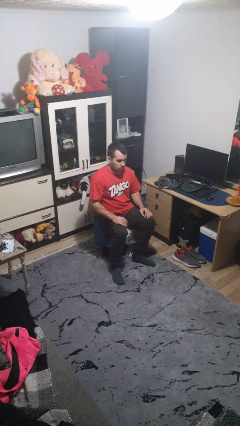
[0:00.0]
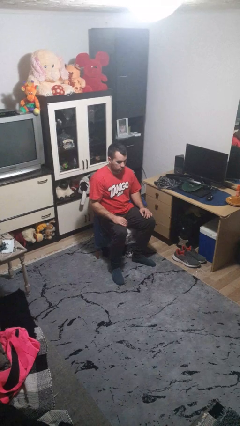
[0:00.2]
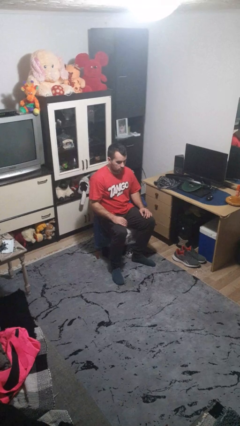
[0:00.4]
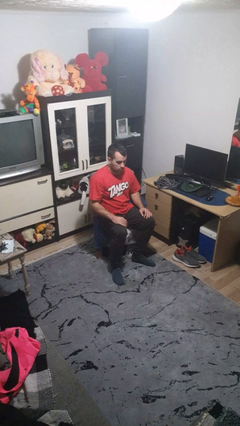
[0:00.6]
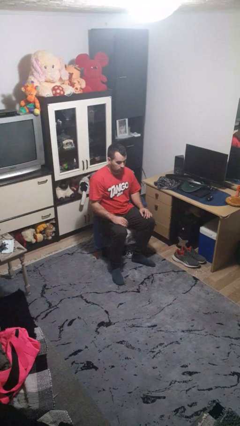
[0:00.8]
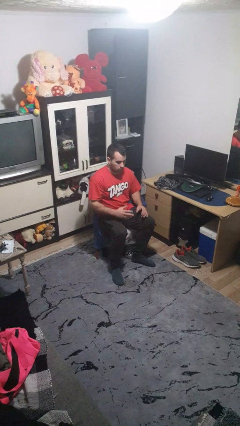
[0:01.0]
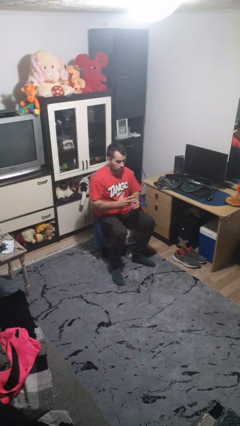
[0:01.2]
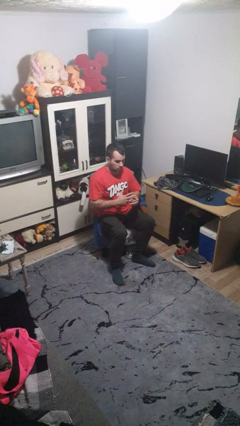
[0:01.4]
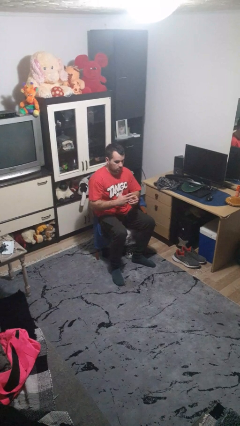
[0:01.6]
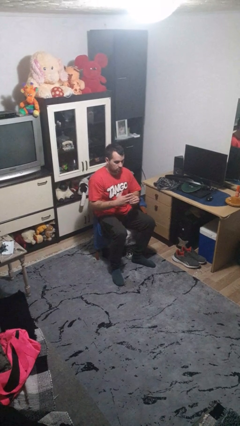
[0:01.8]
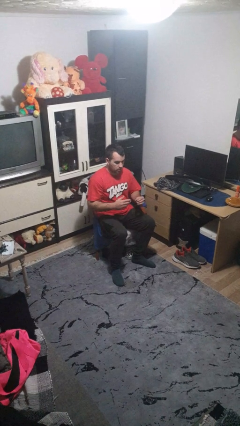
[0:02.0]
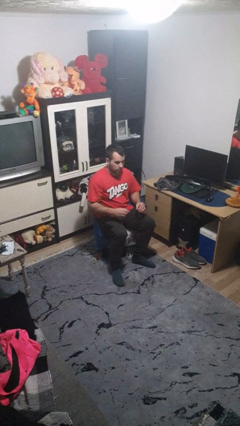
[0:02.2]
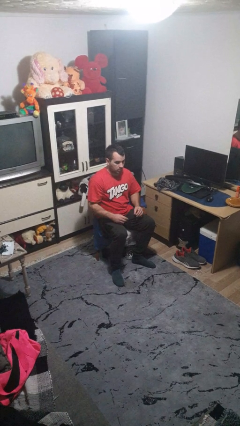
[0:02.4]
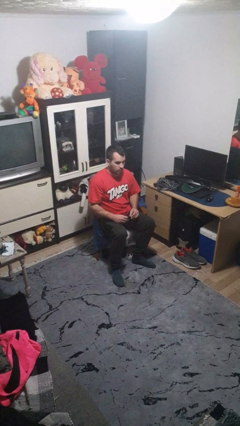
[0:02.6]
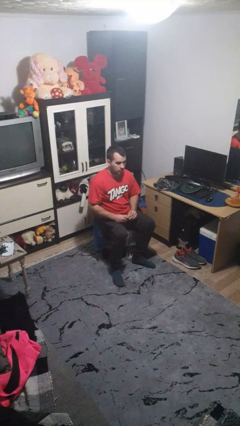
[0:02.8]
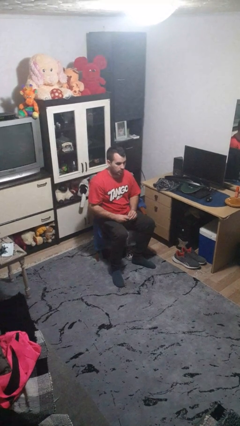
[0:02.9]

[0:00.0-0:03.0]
person takes off ring

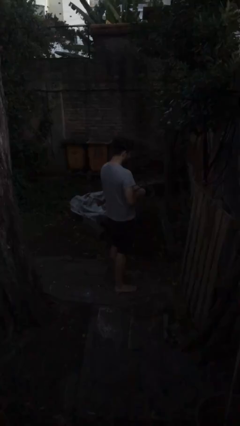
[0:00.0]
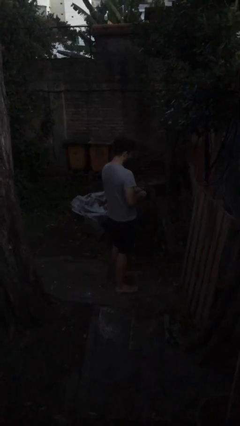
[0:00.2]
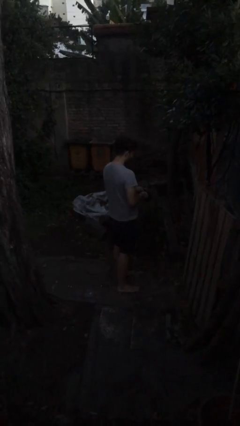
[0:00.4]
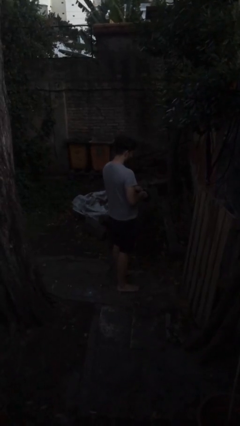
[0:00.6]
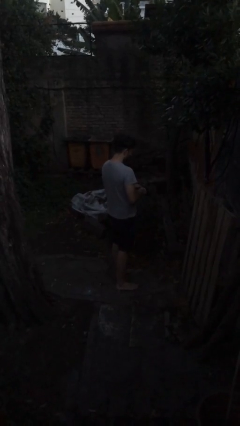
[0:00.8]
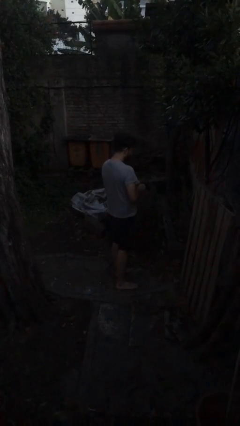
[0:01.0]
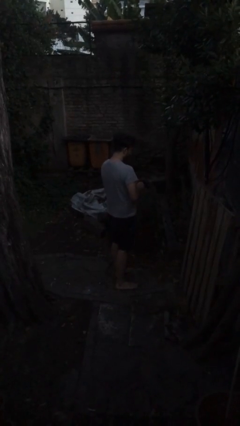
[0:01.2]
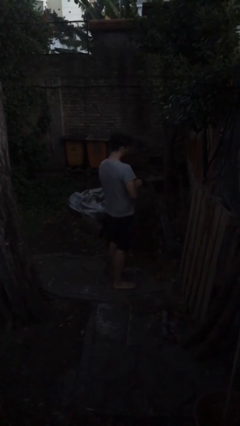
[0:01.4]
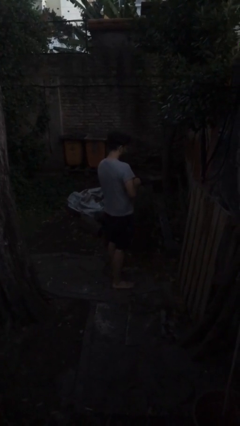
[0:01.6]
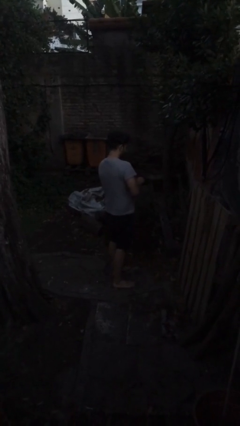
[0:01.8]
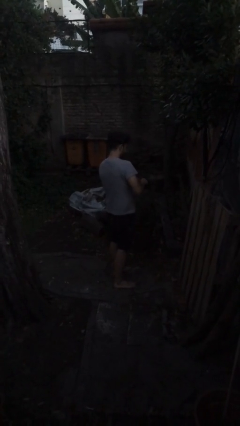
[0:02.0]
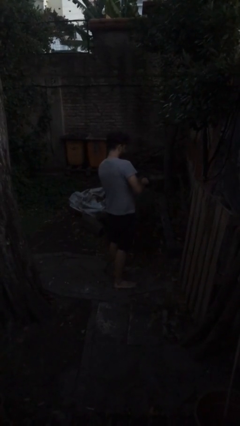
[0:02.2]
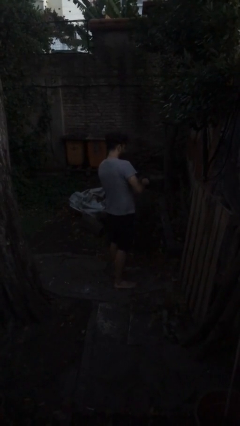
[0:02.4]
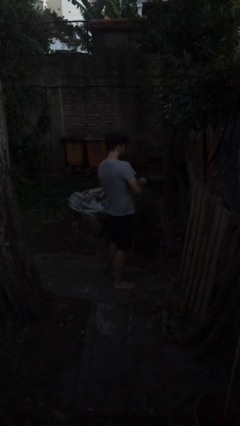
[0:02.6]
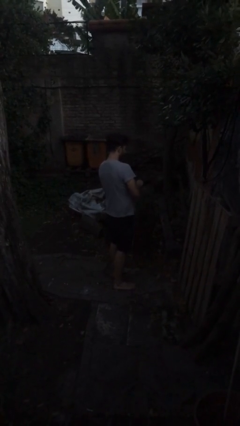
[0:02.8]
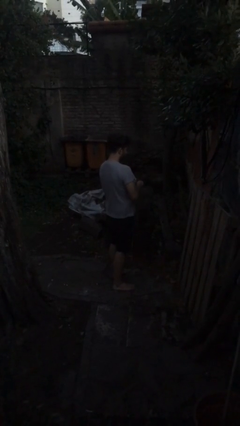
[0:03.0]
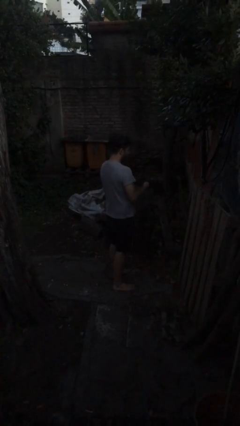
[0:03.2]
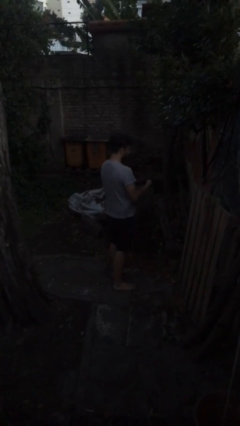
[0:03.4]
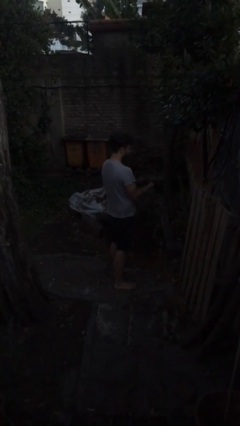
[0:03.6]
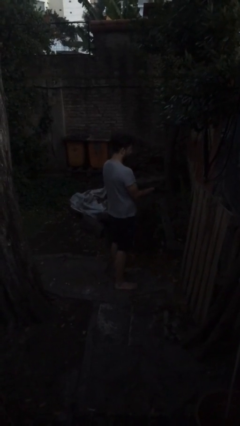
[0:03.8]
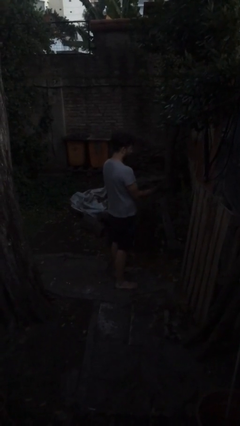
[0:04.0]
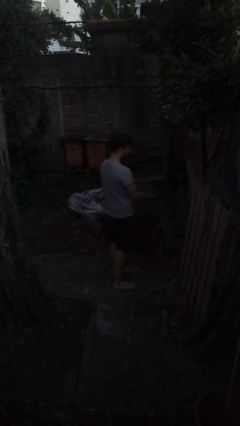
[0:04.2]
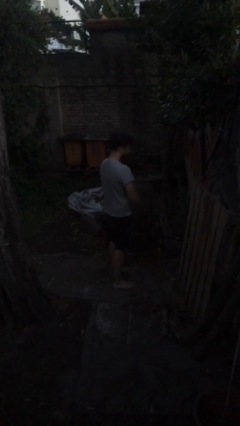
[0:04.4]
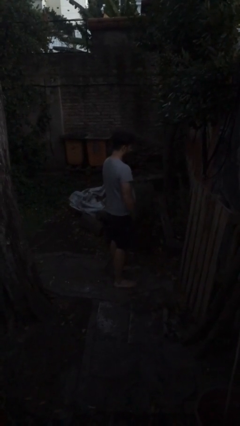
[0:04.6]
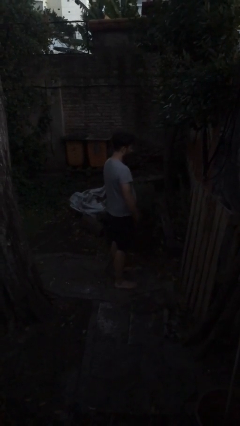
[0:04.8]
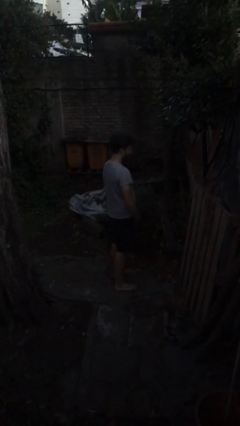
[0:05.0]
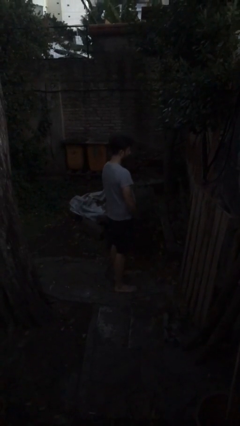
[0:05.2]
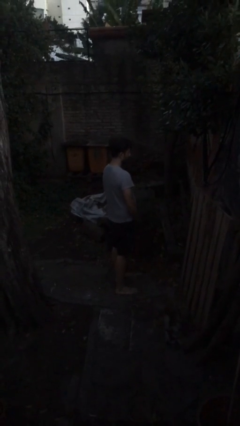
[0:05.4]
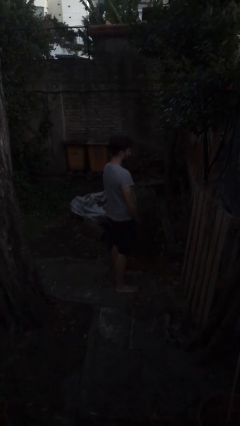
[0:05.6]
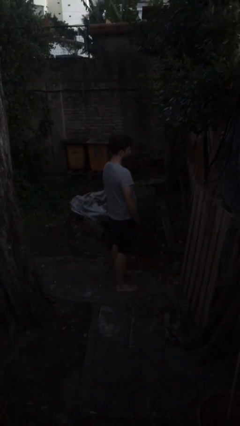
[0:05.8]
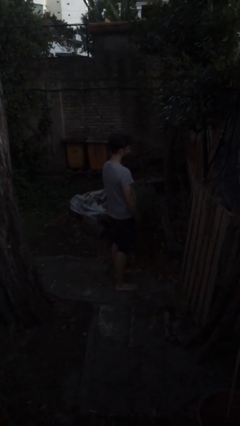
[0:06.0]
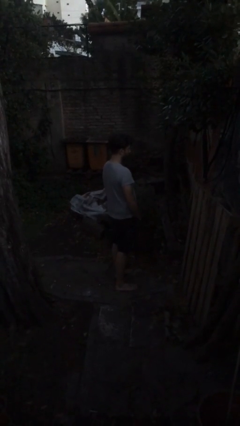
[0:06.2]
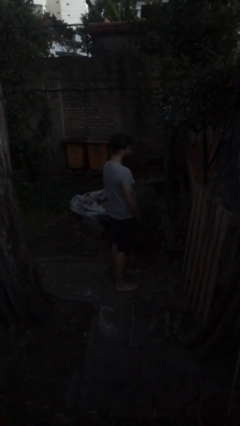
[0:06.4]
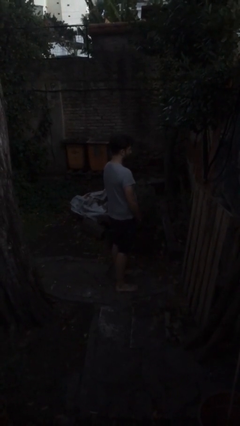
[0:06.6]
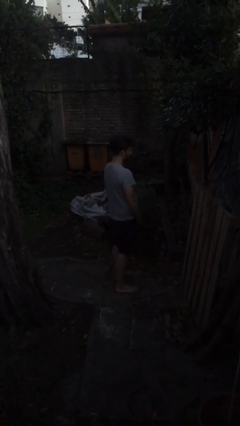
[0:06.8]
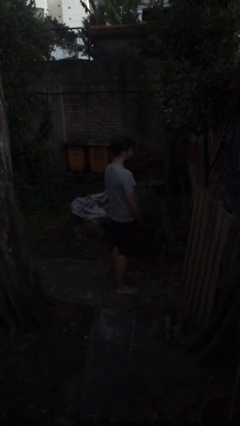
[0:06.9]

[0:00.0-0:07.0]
person puts on gloves

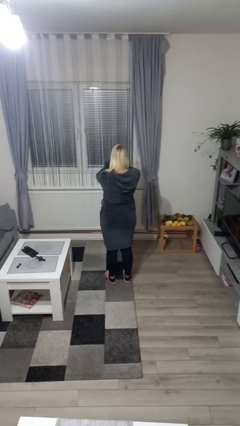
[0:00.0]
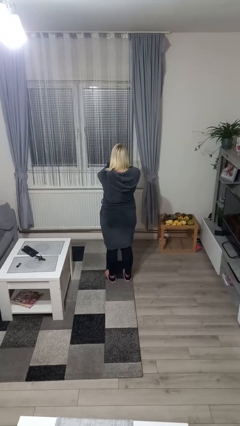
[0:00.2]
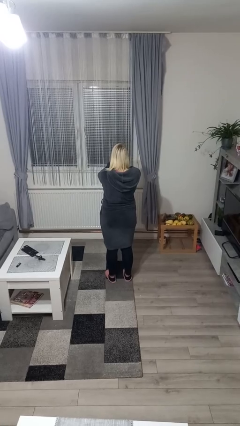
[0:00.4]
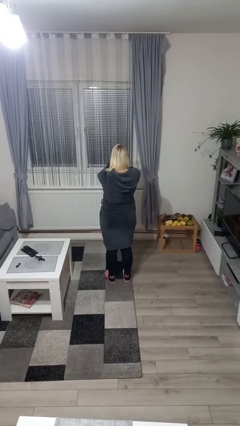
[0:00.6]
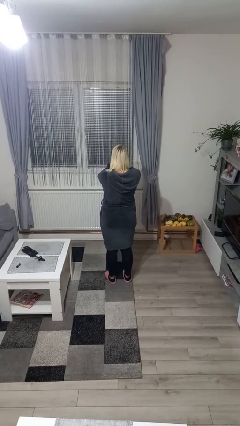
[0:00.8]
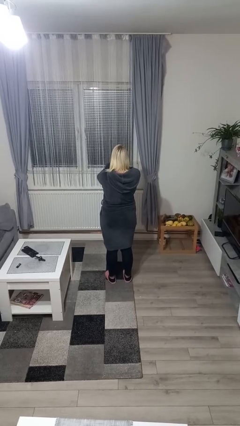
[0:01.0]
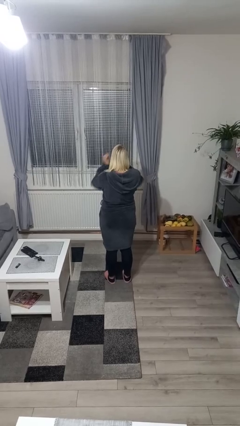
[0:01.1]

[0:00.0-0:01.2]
person covers face with hands

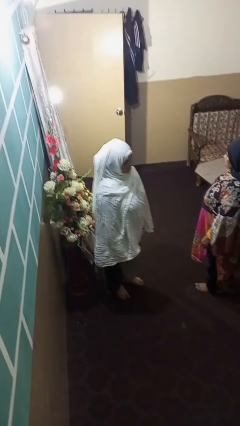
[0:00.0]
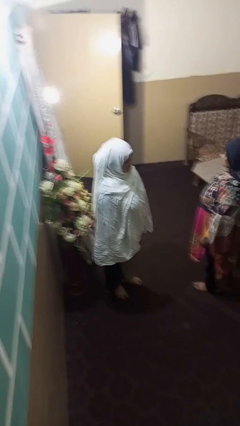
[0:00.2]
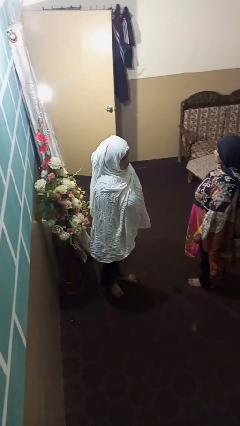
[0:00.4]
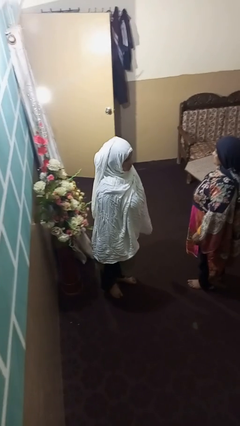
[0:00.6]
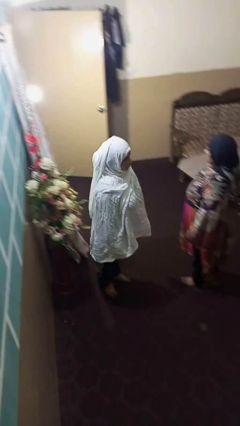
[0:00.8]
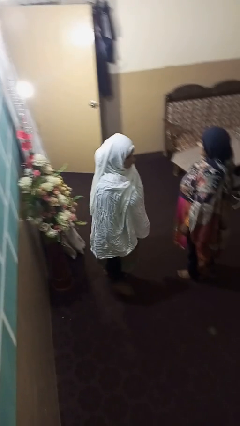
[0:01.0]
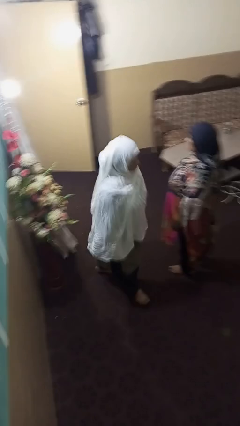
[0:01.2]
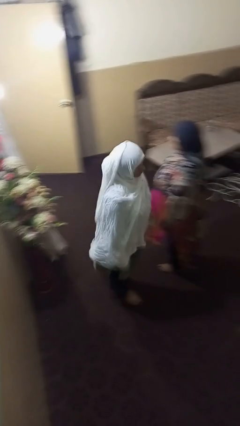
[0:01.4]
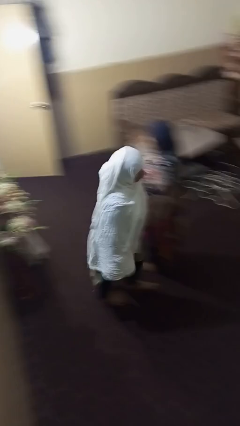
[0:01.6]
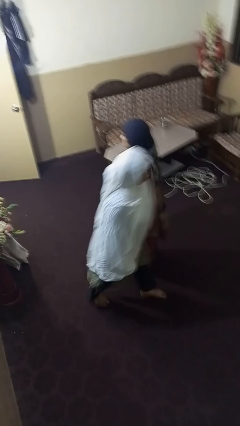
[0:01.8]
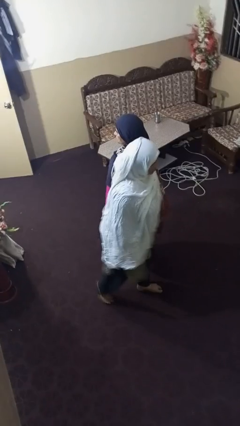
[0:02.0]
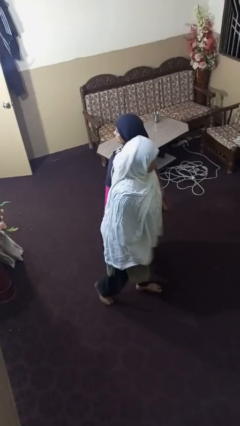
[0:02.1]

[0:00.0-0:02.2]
person shoves person

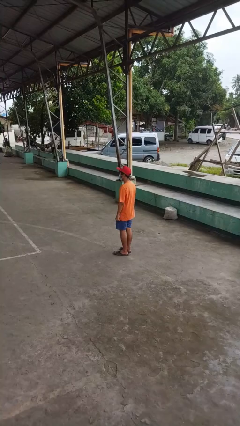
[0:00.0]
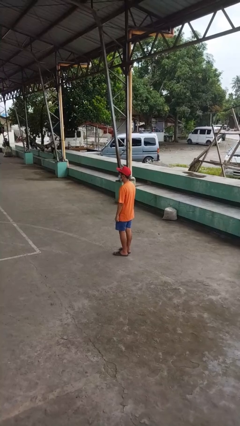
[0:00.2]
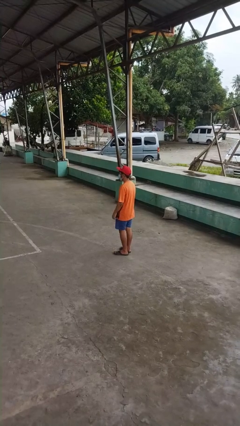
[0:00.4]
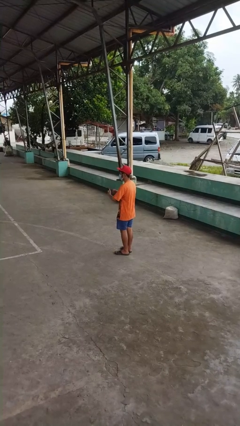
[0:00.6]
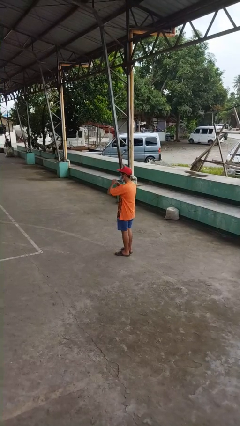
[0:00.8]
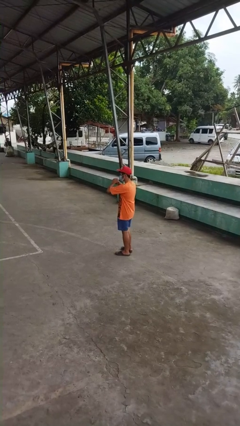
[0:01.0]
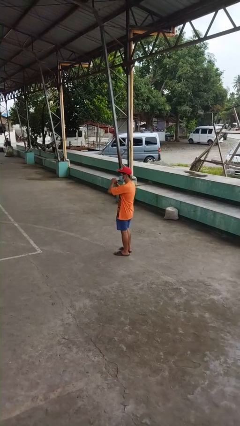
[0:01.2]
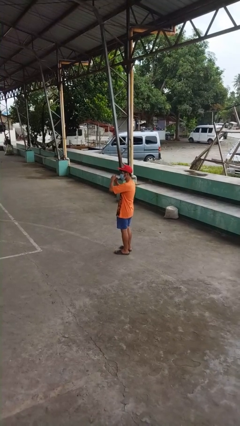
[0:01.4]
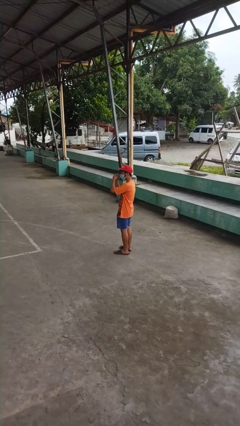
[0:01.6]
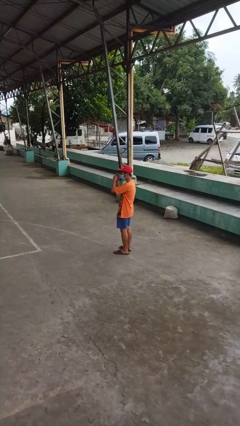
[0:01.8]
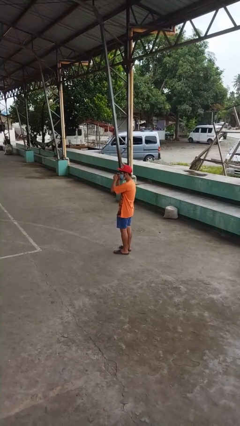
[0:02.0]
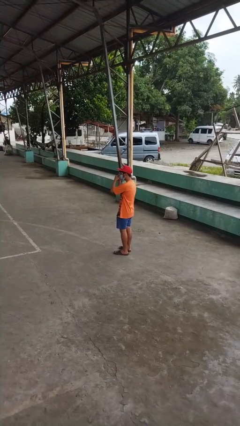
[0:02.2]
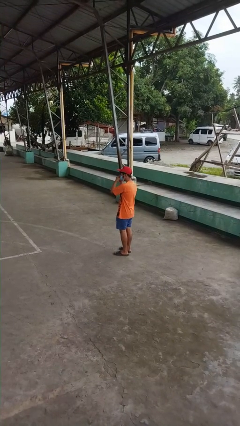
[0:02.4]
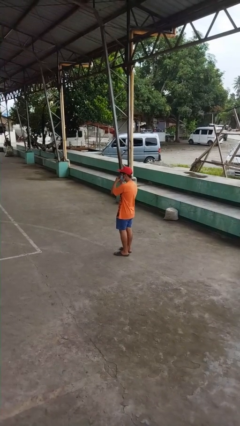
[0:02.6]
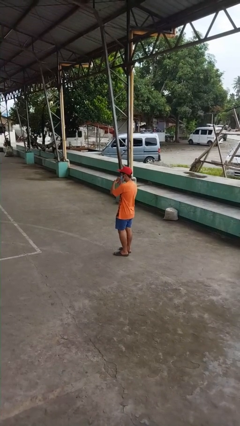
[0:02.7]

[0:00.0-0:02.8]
person cracks knuckles

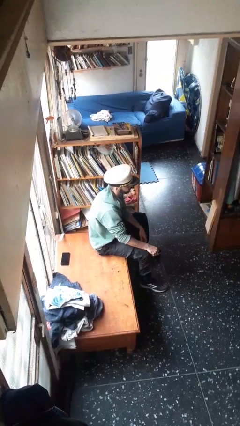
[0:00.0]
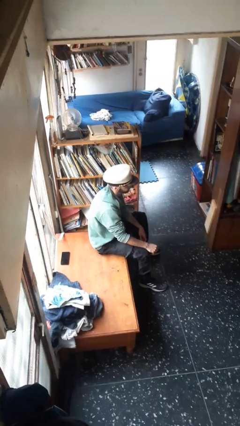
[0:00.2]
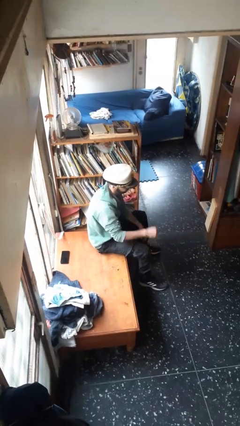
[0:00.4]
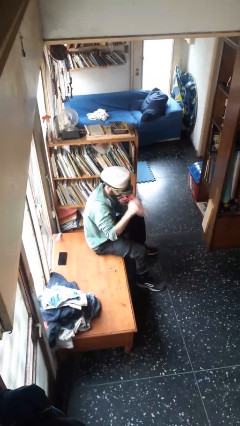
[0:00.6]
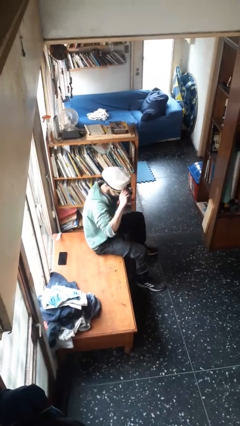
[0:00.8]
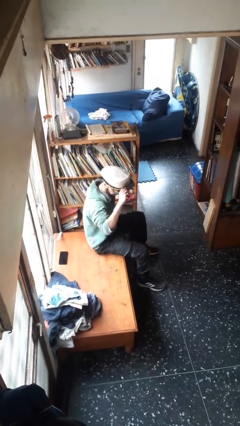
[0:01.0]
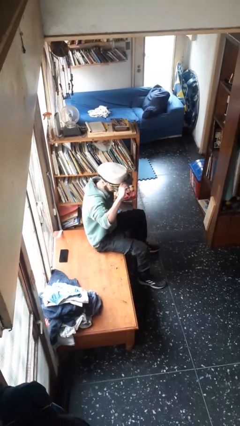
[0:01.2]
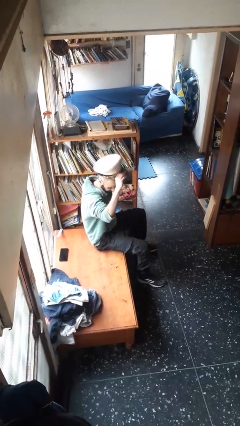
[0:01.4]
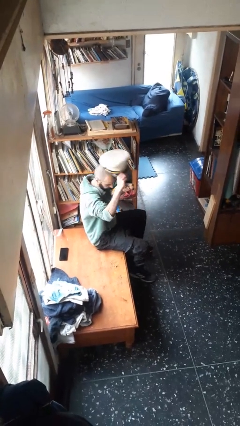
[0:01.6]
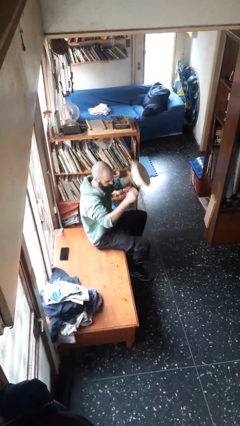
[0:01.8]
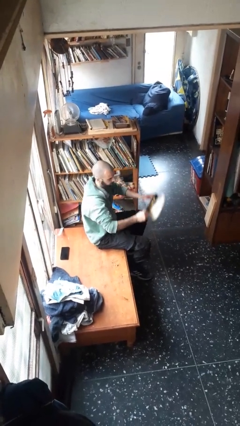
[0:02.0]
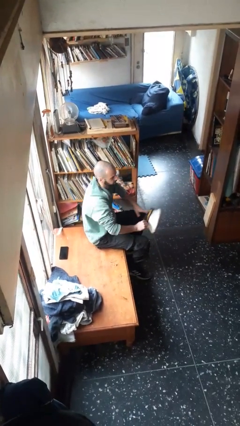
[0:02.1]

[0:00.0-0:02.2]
person takes off hat
